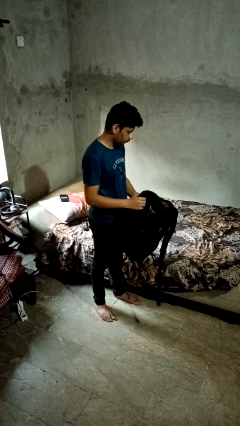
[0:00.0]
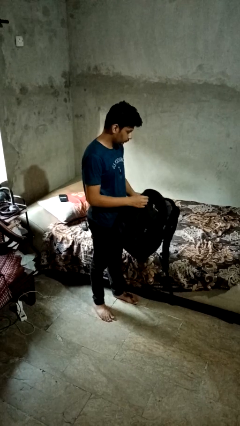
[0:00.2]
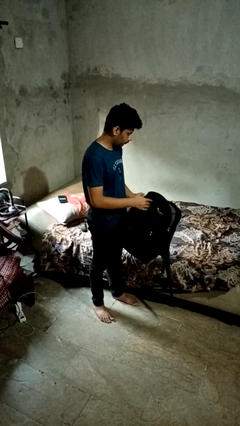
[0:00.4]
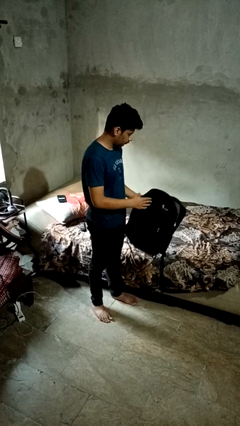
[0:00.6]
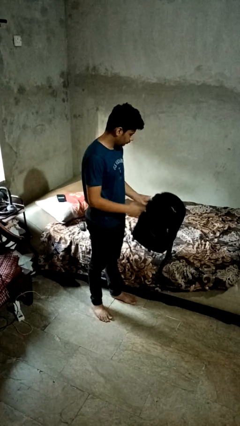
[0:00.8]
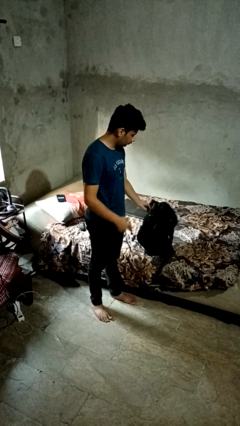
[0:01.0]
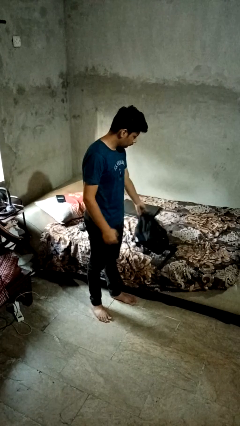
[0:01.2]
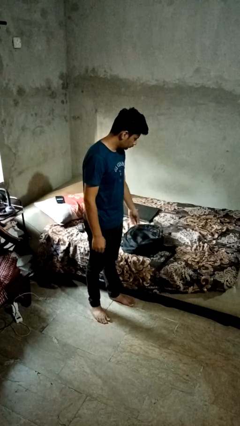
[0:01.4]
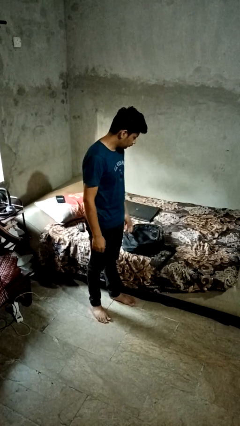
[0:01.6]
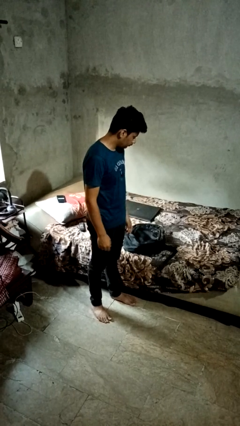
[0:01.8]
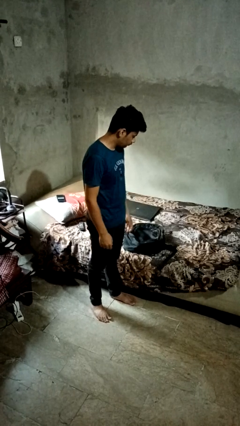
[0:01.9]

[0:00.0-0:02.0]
person puts down object on bed

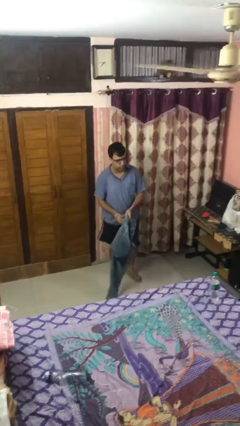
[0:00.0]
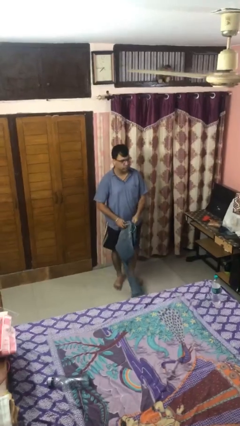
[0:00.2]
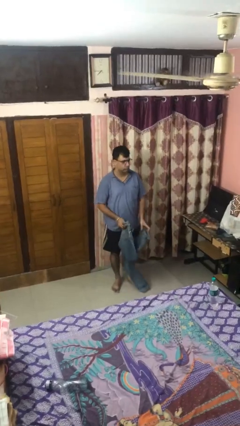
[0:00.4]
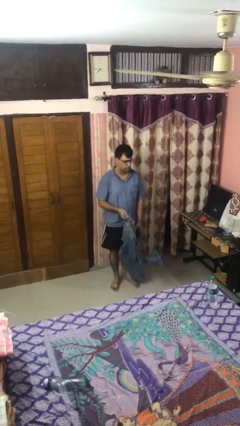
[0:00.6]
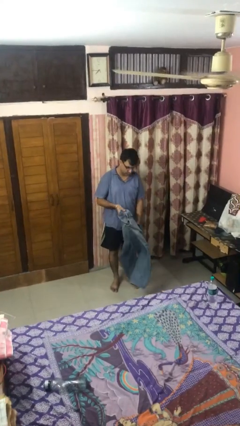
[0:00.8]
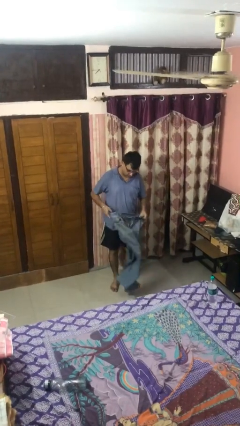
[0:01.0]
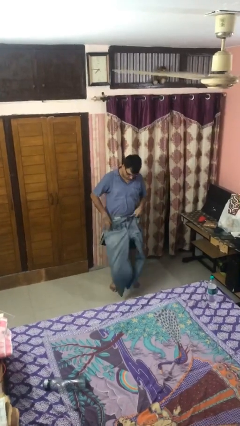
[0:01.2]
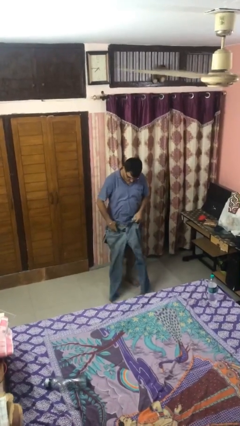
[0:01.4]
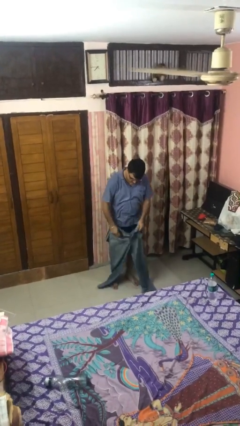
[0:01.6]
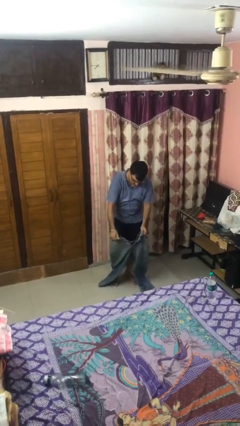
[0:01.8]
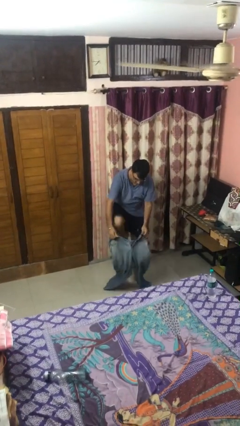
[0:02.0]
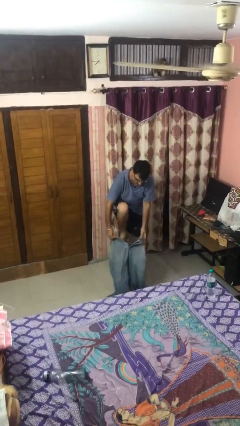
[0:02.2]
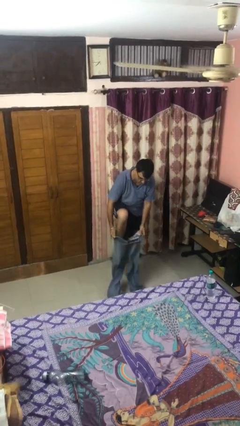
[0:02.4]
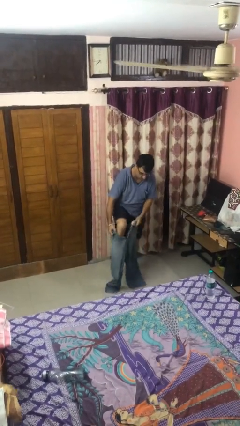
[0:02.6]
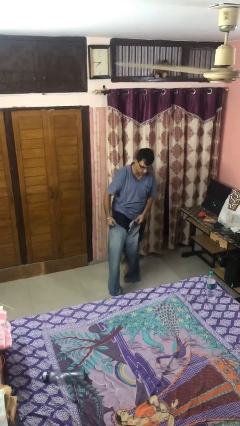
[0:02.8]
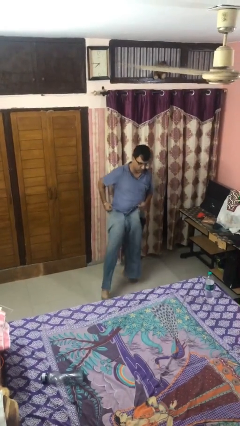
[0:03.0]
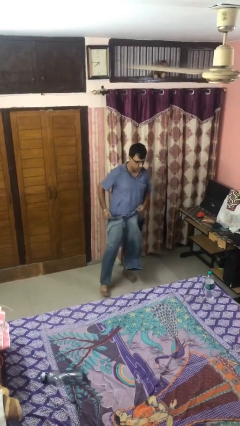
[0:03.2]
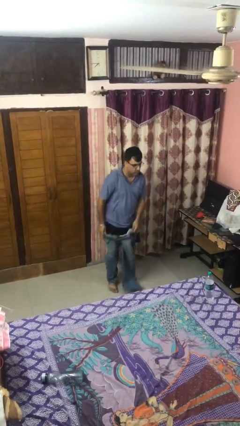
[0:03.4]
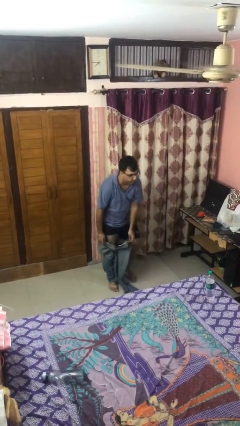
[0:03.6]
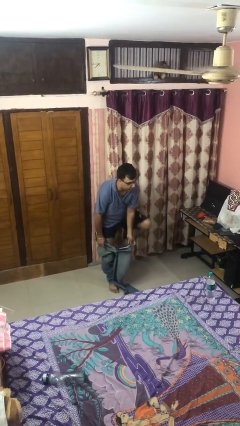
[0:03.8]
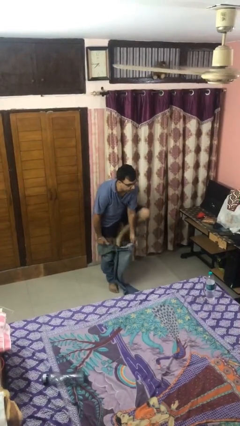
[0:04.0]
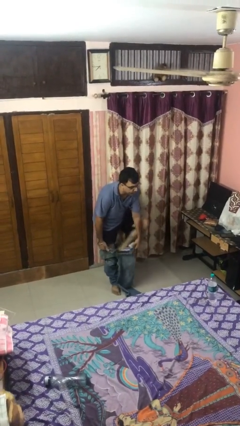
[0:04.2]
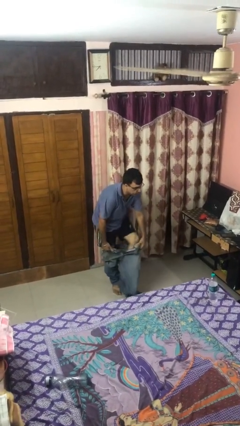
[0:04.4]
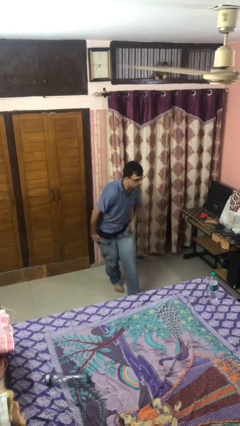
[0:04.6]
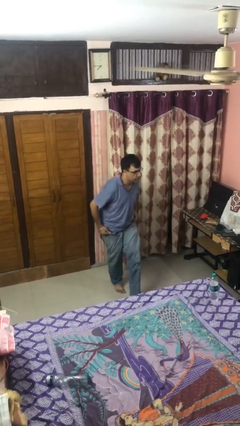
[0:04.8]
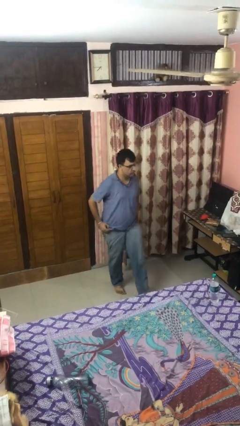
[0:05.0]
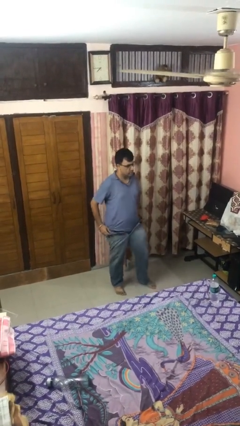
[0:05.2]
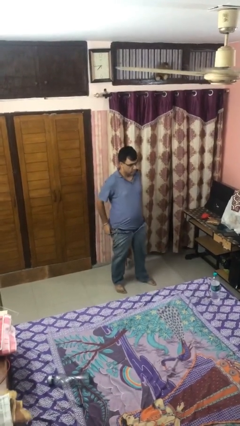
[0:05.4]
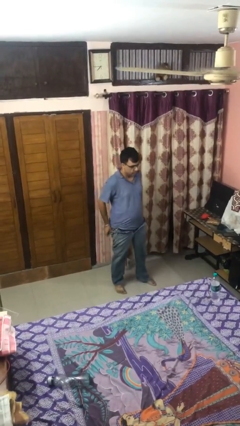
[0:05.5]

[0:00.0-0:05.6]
person puts on pants

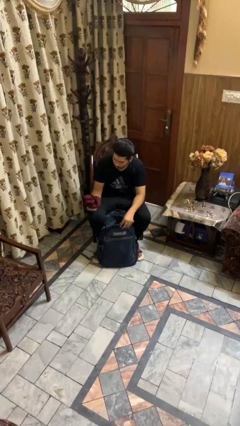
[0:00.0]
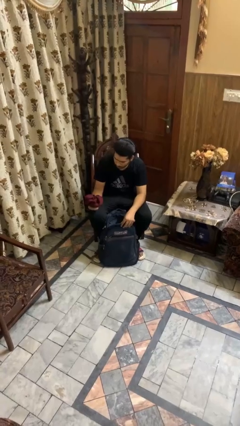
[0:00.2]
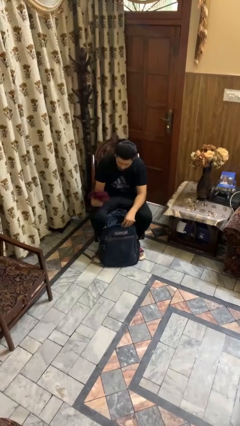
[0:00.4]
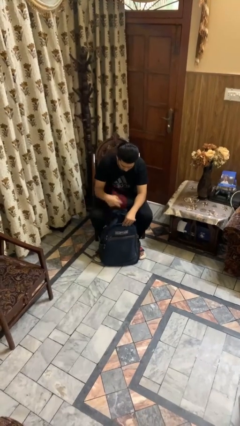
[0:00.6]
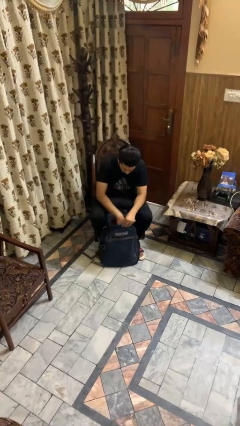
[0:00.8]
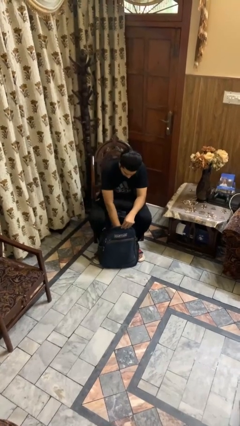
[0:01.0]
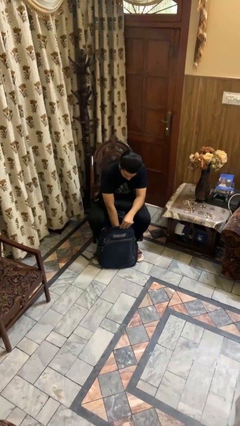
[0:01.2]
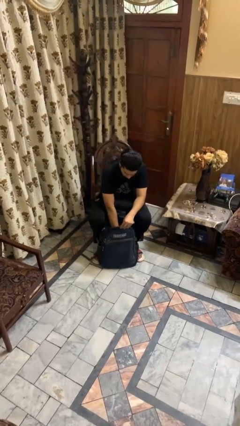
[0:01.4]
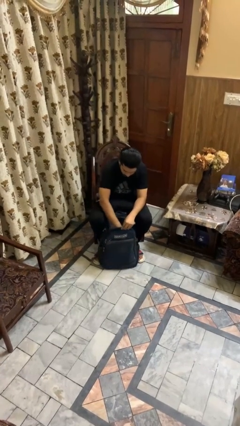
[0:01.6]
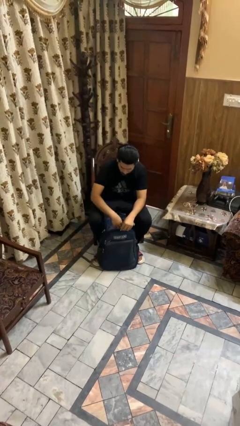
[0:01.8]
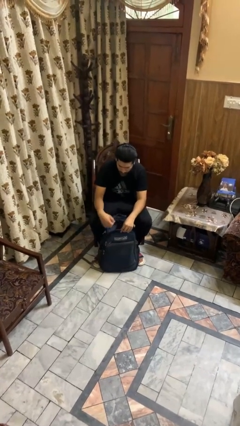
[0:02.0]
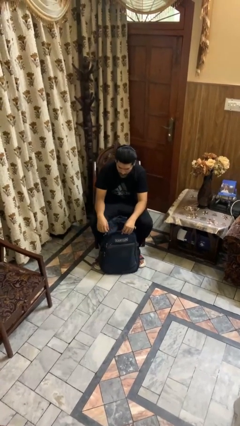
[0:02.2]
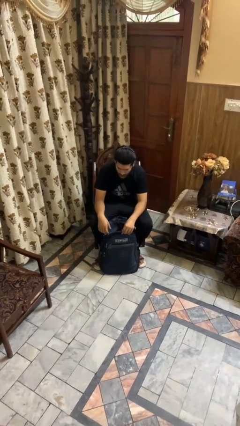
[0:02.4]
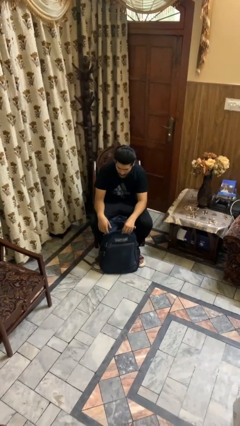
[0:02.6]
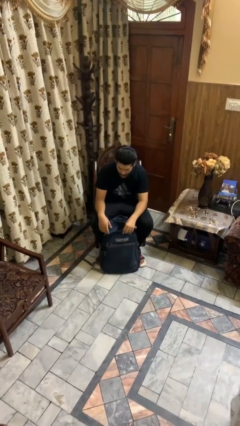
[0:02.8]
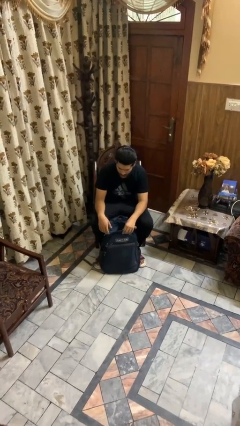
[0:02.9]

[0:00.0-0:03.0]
person puts object into backpack

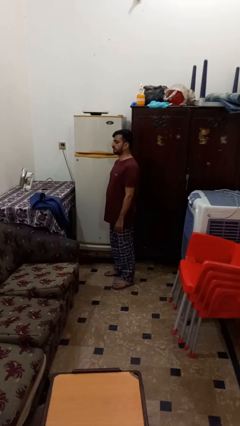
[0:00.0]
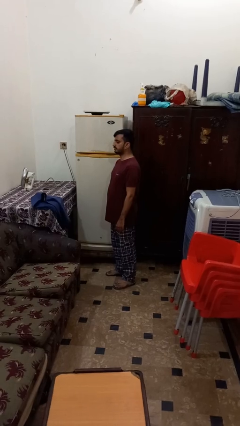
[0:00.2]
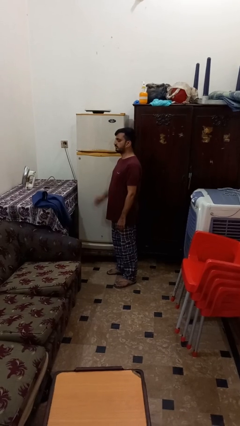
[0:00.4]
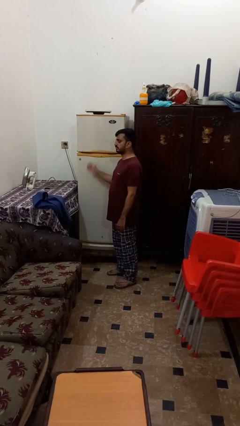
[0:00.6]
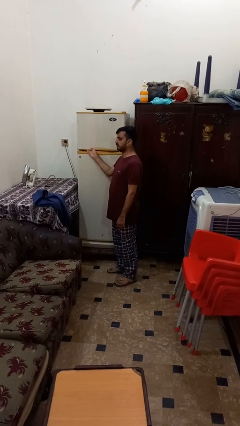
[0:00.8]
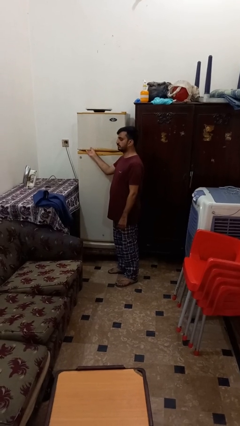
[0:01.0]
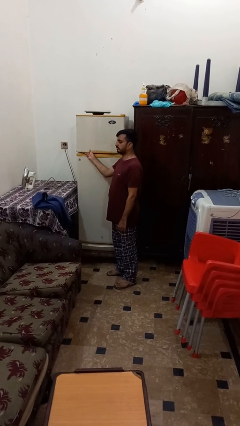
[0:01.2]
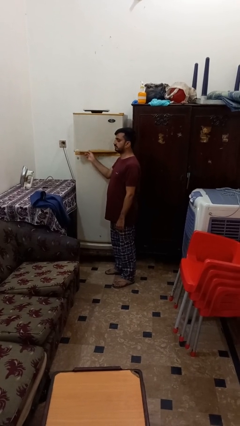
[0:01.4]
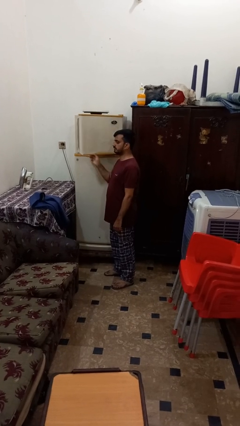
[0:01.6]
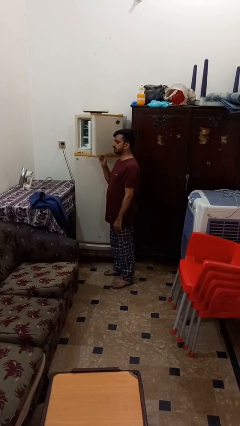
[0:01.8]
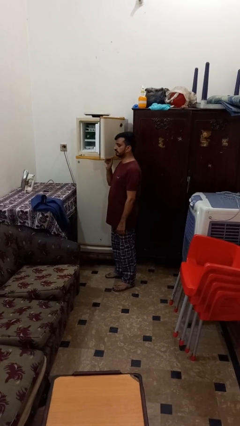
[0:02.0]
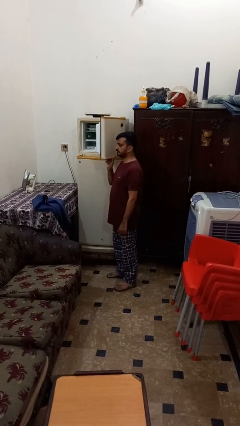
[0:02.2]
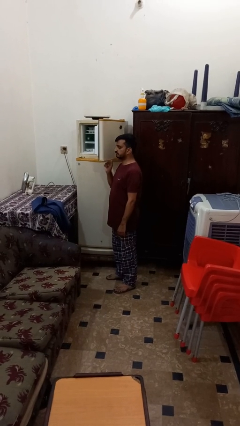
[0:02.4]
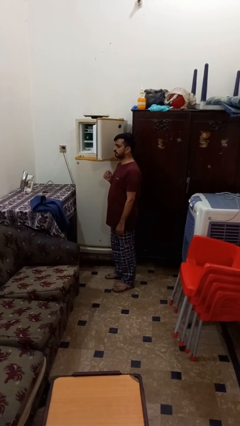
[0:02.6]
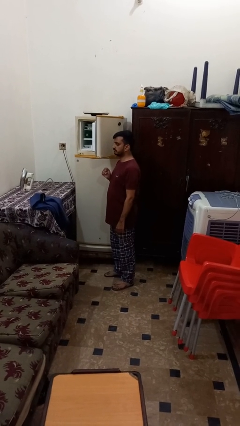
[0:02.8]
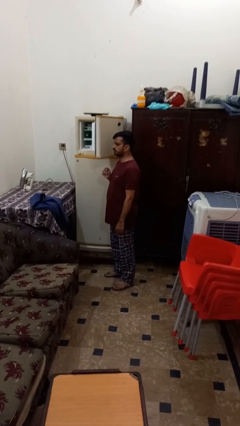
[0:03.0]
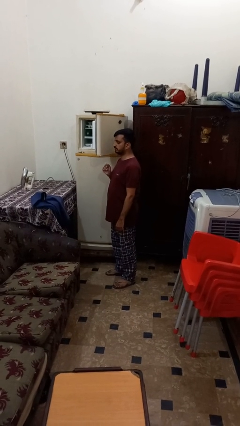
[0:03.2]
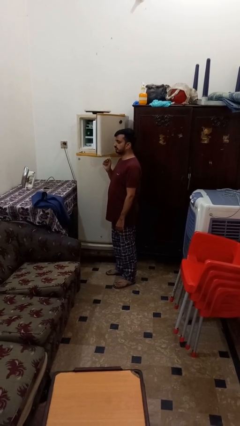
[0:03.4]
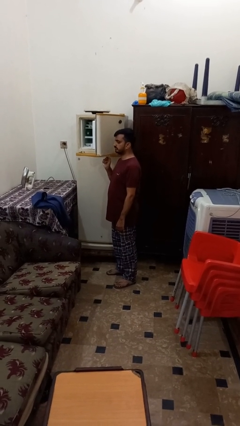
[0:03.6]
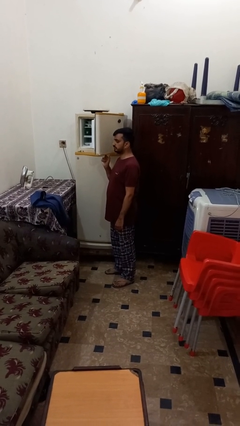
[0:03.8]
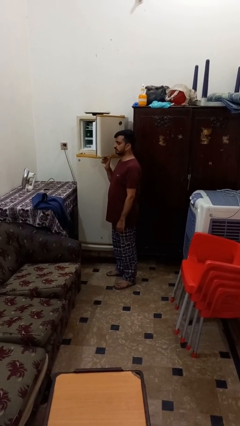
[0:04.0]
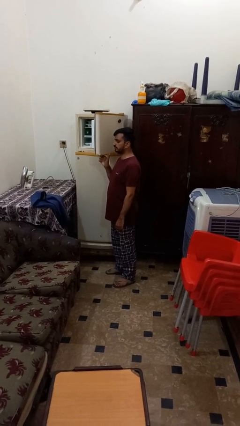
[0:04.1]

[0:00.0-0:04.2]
person opens refrigerator

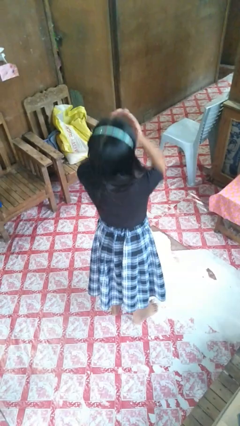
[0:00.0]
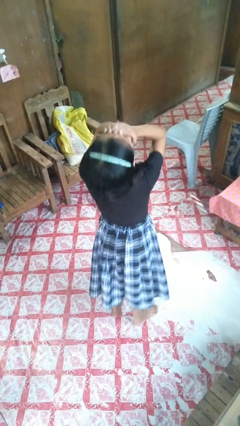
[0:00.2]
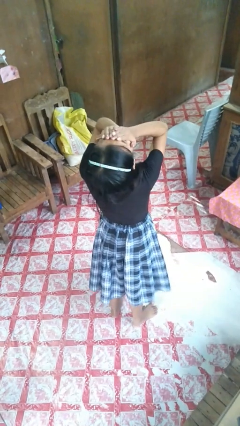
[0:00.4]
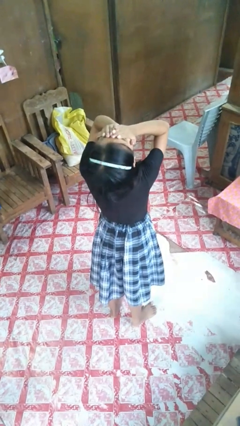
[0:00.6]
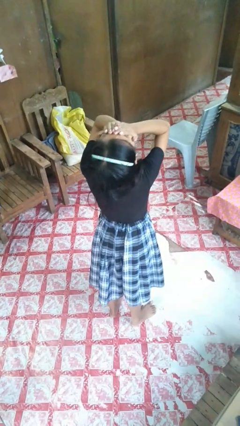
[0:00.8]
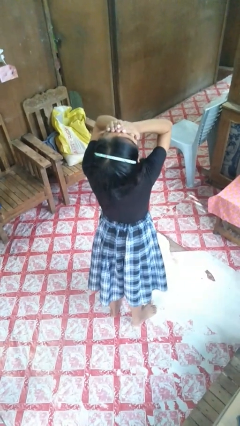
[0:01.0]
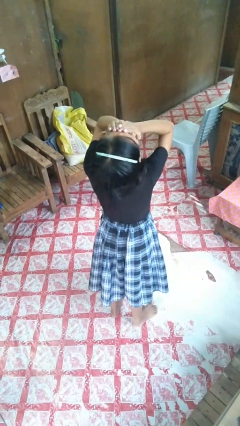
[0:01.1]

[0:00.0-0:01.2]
person covers face with hands

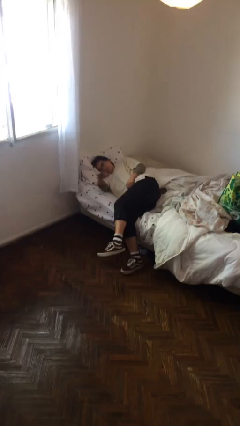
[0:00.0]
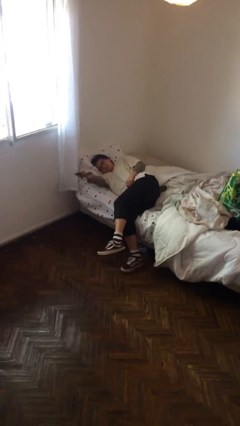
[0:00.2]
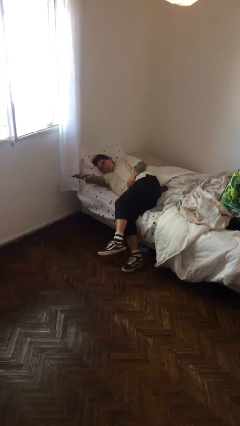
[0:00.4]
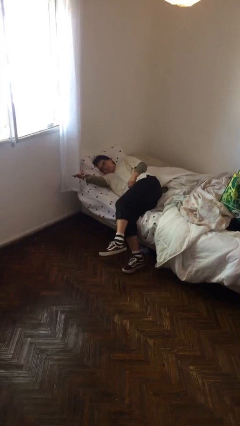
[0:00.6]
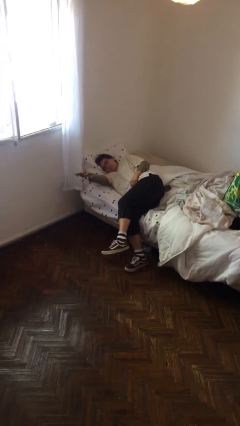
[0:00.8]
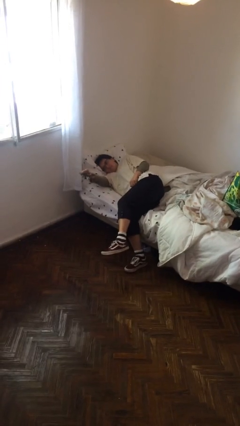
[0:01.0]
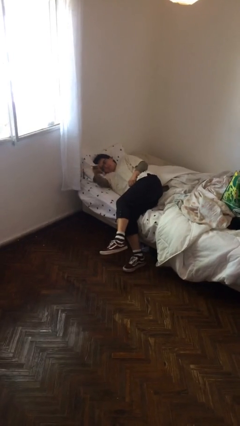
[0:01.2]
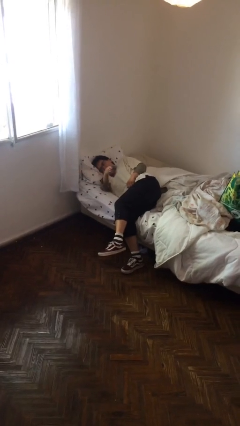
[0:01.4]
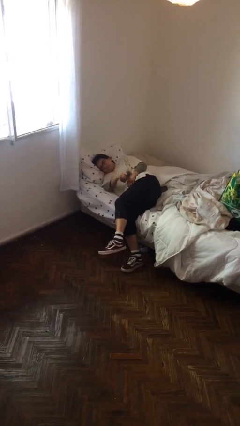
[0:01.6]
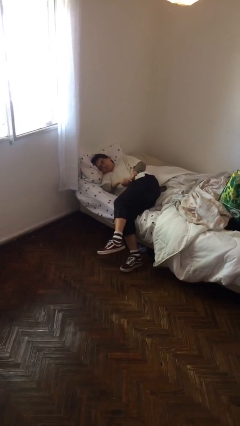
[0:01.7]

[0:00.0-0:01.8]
person uses television remote
